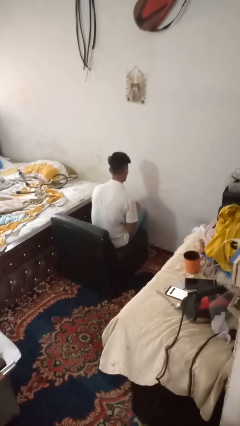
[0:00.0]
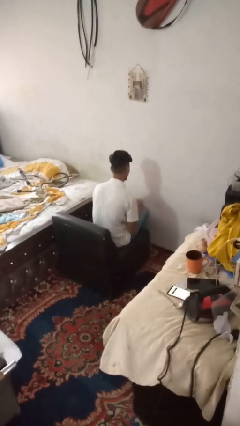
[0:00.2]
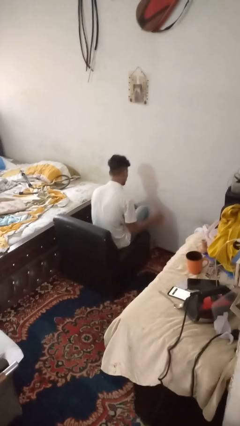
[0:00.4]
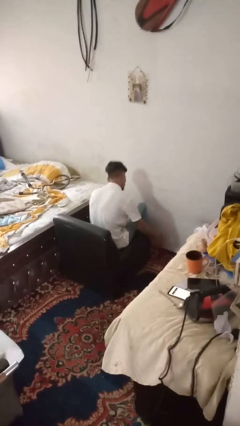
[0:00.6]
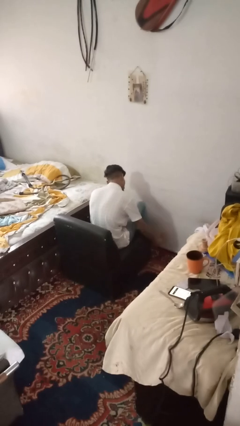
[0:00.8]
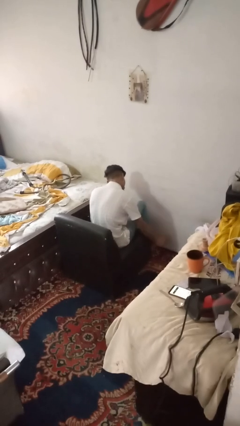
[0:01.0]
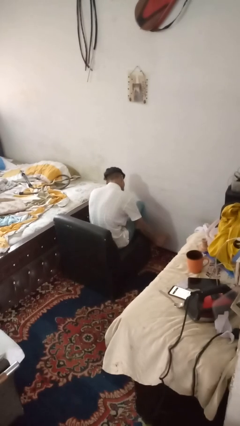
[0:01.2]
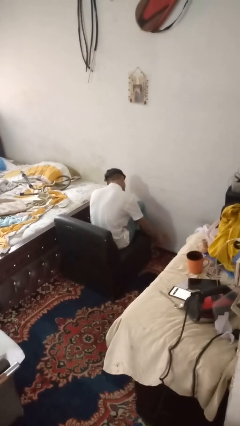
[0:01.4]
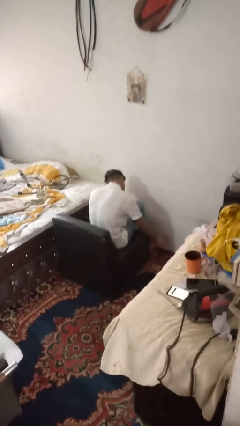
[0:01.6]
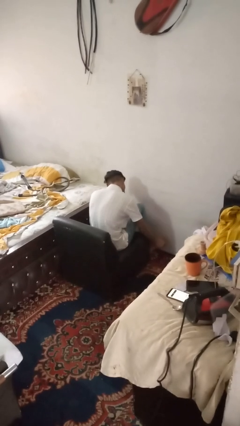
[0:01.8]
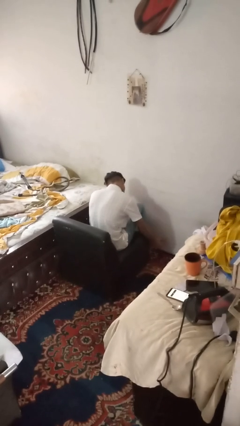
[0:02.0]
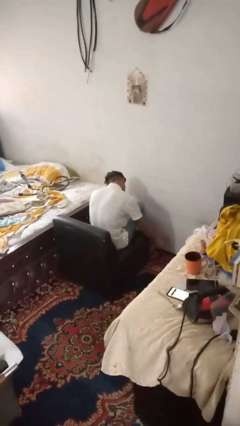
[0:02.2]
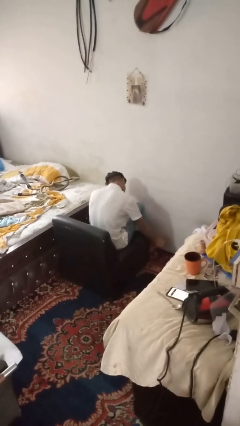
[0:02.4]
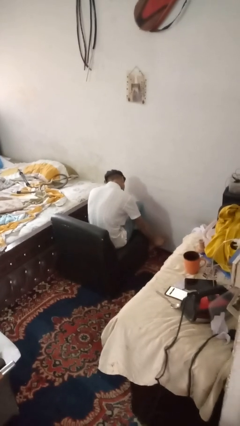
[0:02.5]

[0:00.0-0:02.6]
person rubs foot

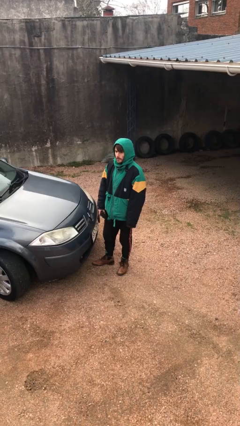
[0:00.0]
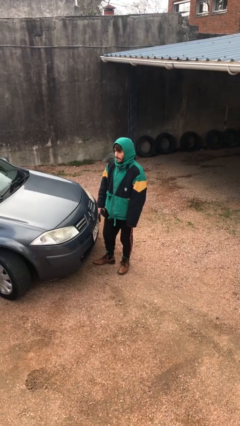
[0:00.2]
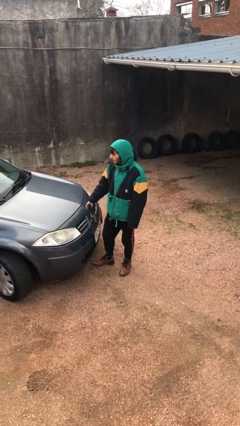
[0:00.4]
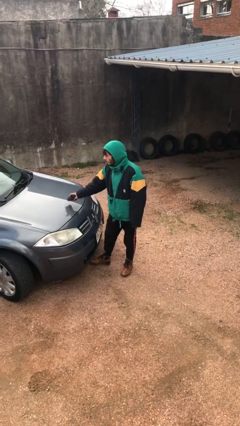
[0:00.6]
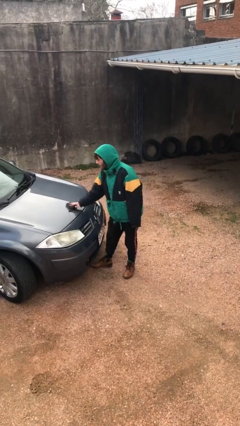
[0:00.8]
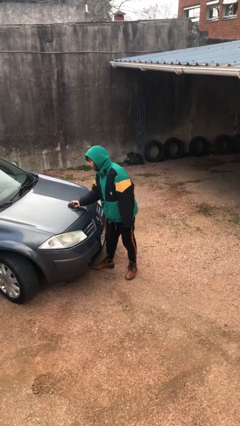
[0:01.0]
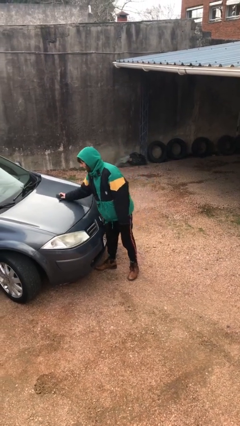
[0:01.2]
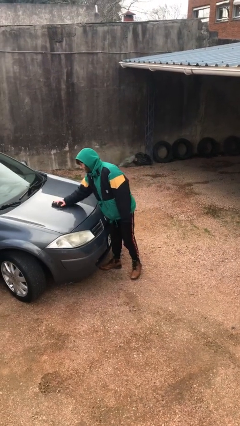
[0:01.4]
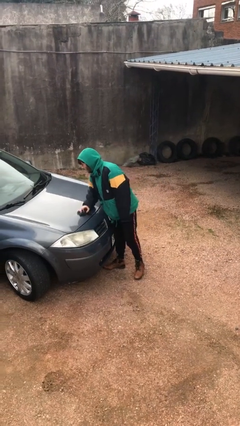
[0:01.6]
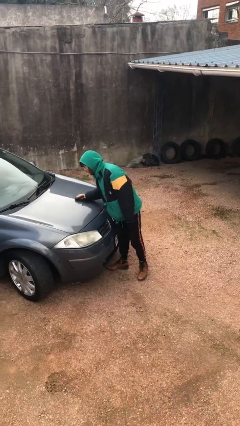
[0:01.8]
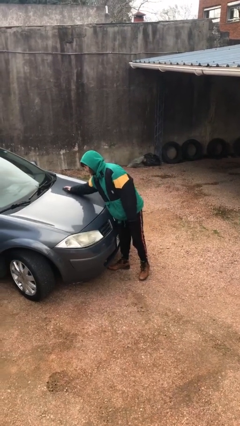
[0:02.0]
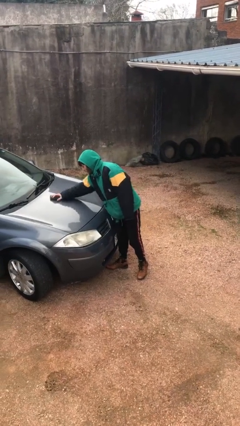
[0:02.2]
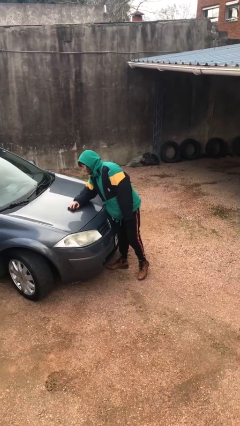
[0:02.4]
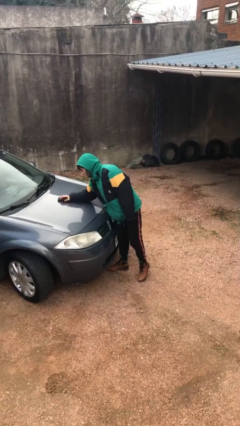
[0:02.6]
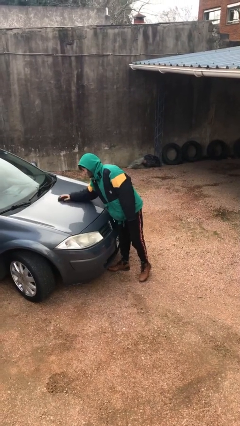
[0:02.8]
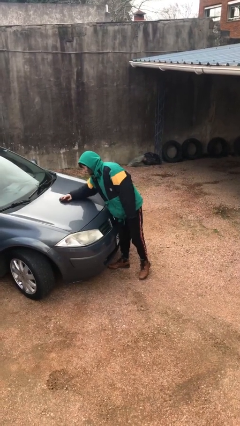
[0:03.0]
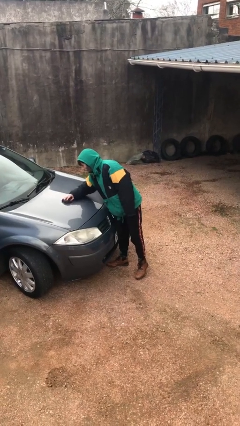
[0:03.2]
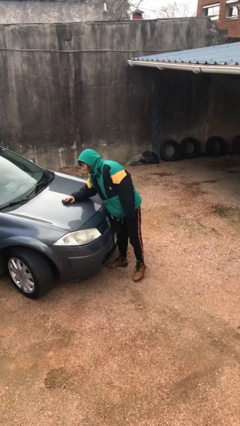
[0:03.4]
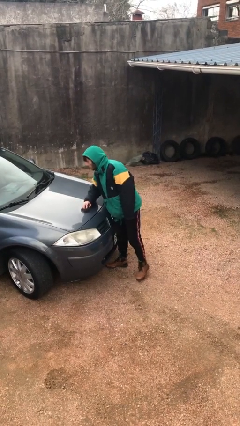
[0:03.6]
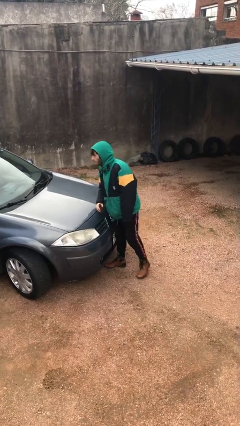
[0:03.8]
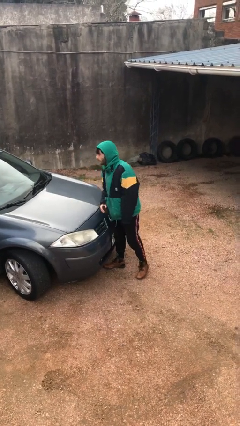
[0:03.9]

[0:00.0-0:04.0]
person polishes car with rag

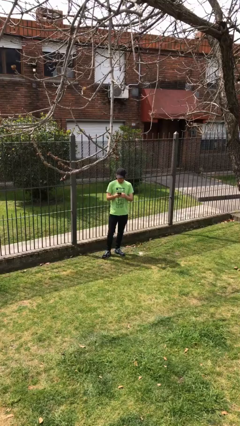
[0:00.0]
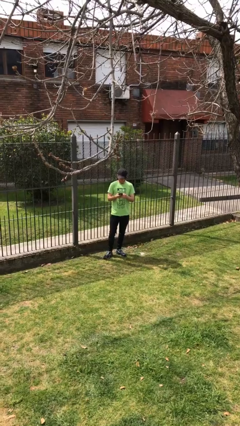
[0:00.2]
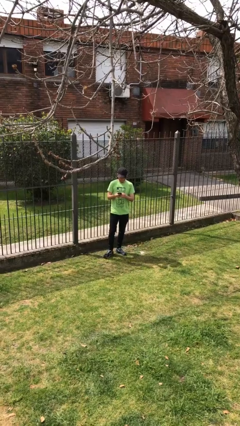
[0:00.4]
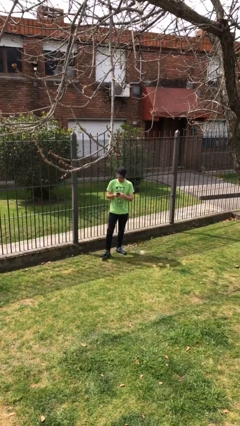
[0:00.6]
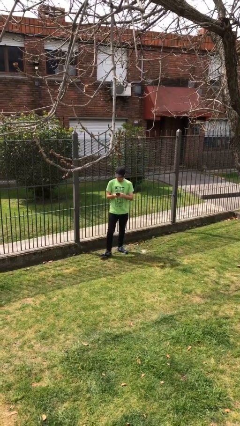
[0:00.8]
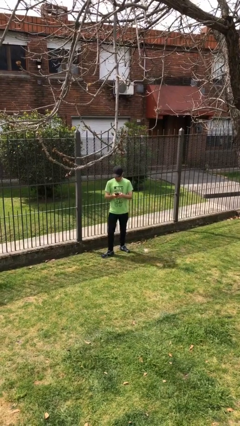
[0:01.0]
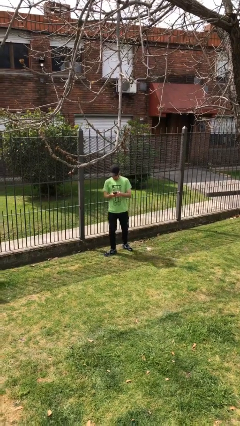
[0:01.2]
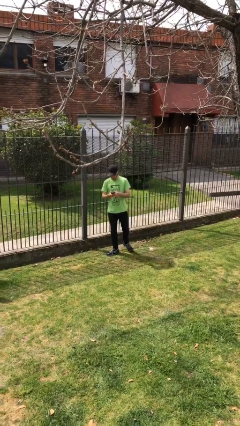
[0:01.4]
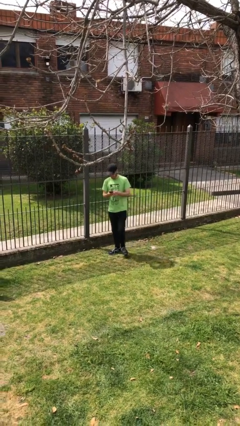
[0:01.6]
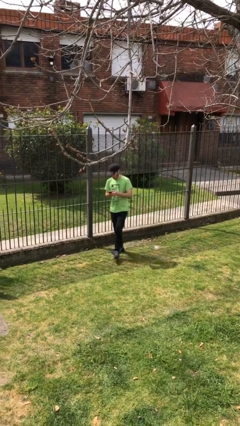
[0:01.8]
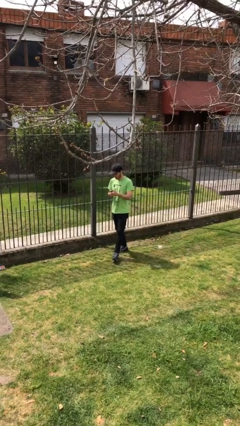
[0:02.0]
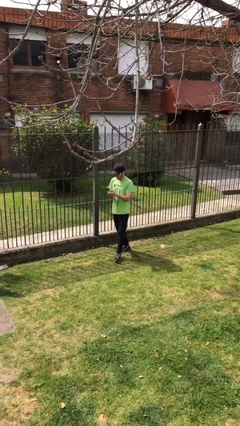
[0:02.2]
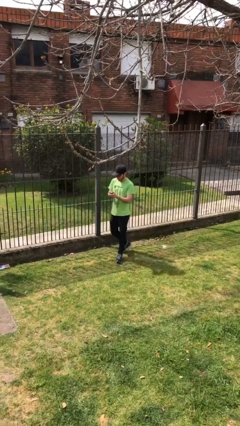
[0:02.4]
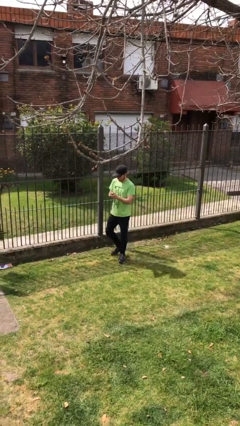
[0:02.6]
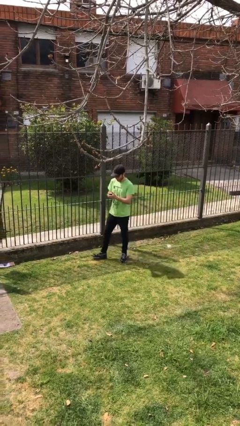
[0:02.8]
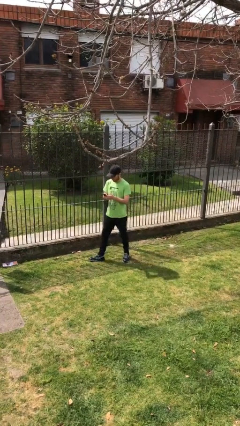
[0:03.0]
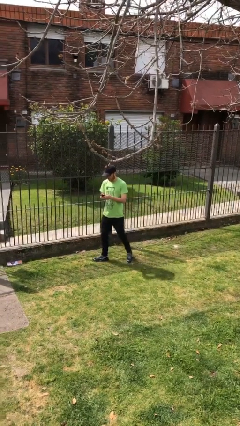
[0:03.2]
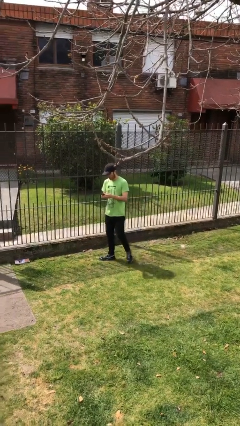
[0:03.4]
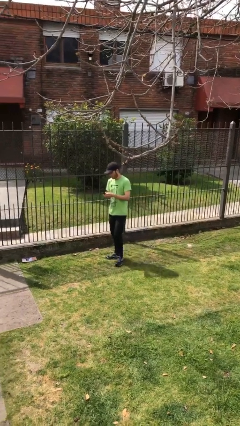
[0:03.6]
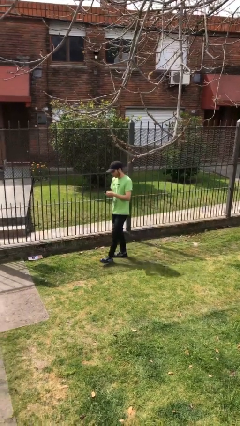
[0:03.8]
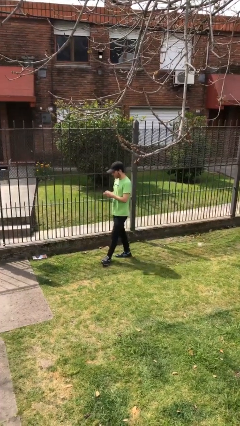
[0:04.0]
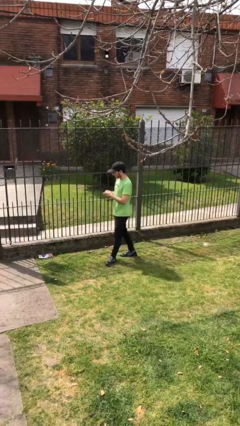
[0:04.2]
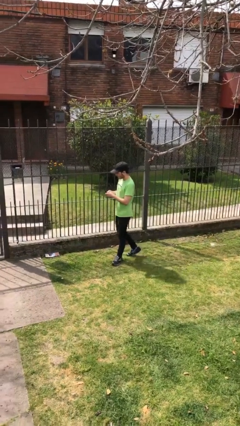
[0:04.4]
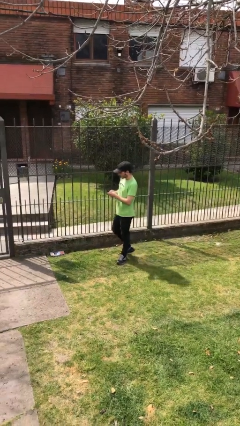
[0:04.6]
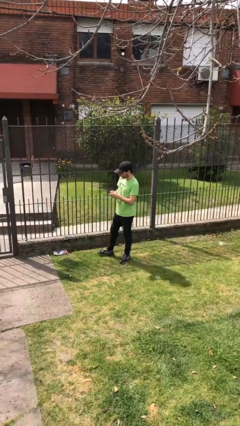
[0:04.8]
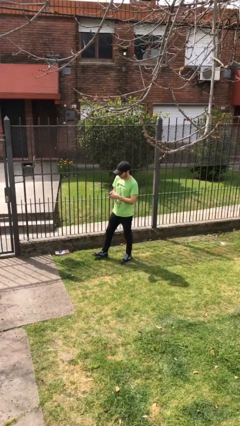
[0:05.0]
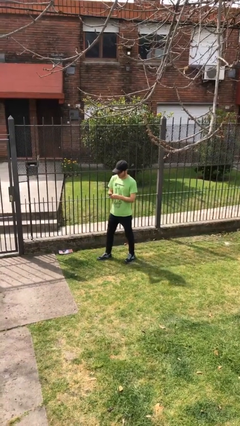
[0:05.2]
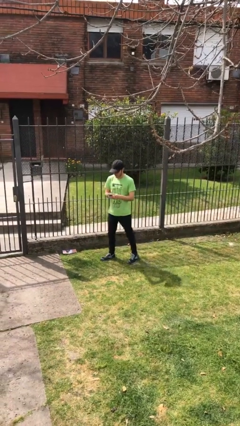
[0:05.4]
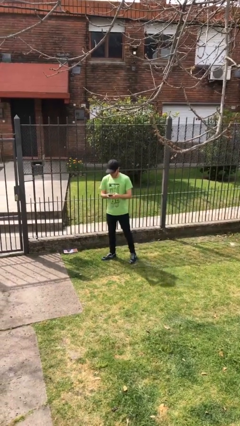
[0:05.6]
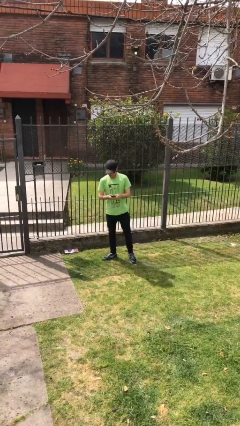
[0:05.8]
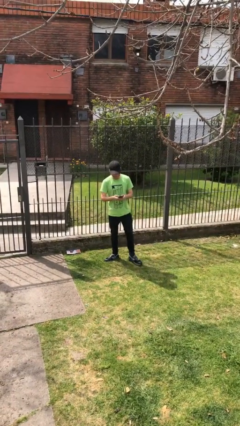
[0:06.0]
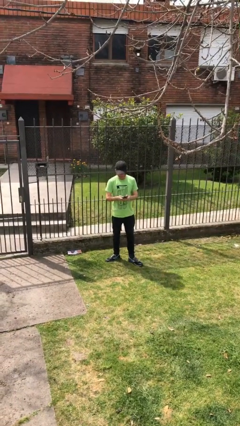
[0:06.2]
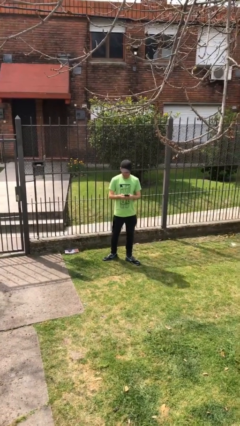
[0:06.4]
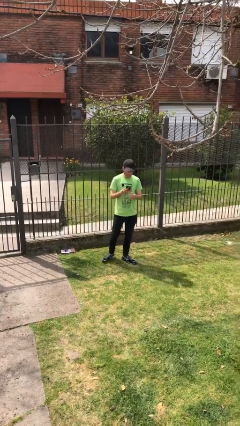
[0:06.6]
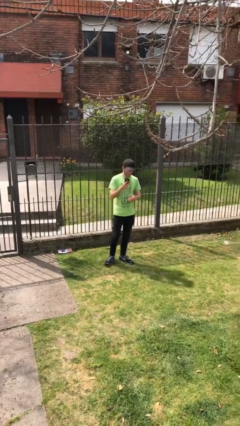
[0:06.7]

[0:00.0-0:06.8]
person texts on phone

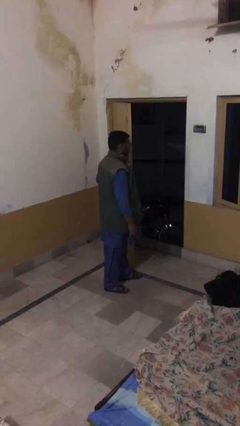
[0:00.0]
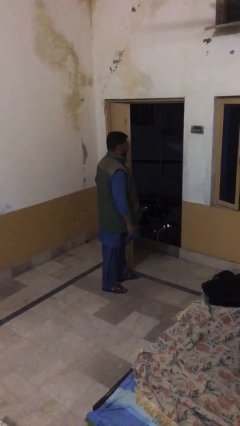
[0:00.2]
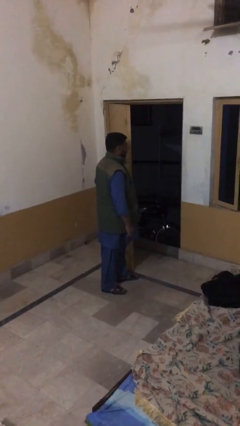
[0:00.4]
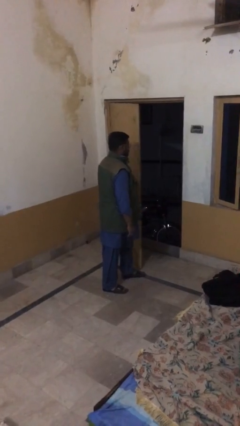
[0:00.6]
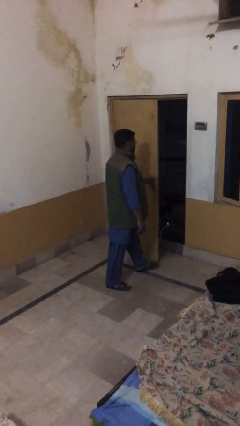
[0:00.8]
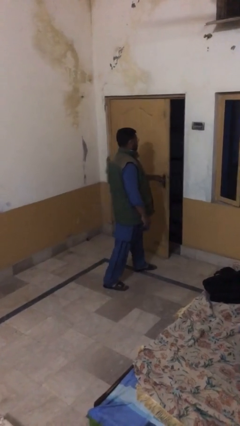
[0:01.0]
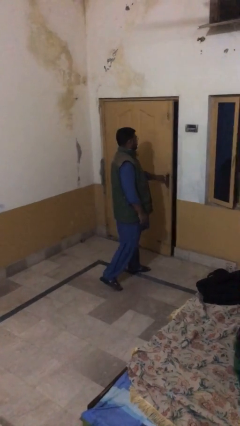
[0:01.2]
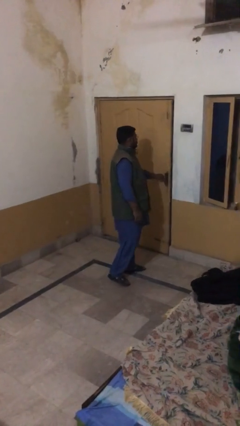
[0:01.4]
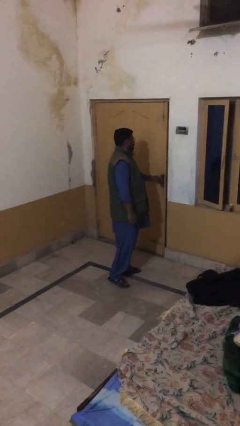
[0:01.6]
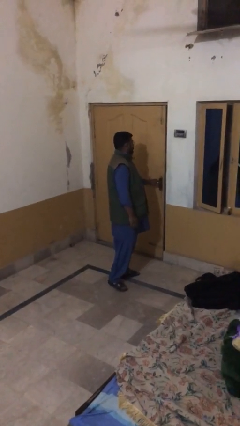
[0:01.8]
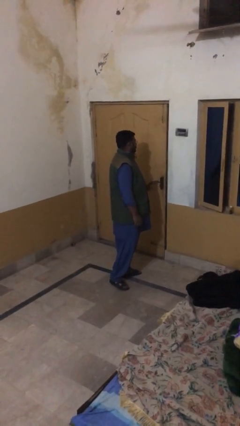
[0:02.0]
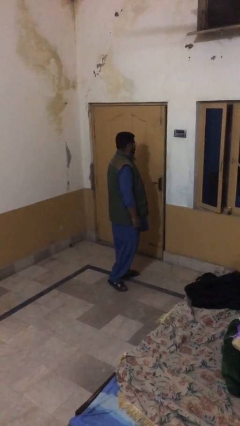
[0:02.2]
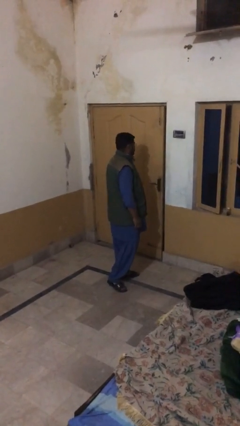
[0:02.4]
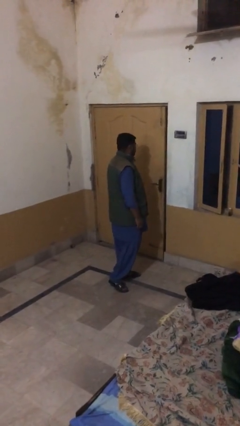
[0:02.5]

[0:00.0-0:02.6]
person closes facility door

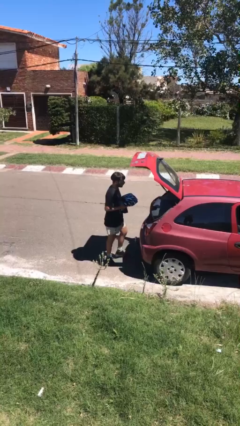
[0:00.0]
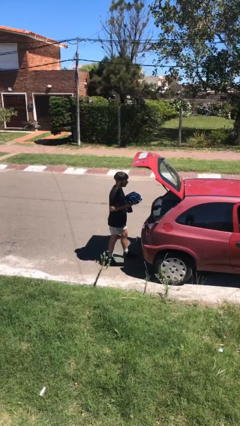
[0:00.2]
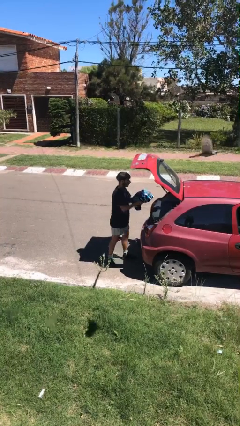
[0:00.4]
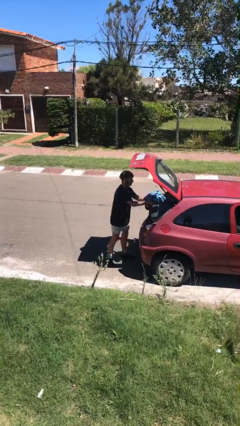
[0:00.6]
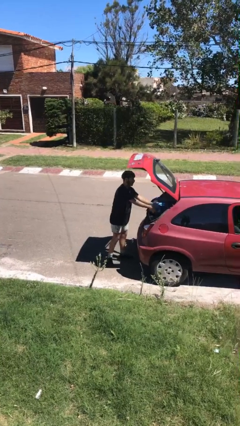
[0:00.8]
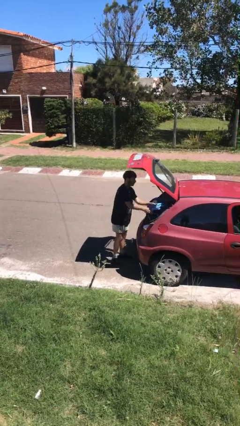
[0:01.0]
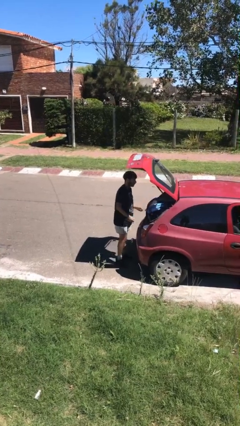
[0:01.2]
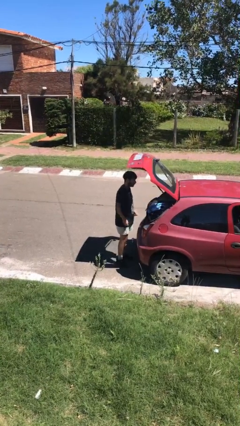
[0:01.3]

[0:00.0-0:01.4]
person loads car

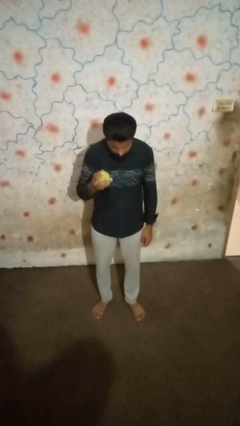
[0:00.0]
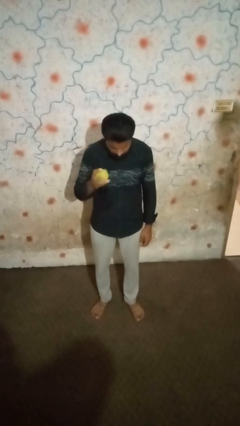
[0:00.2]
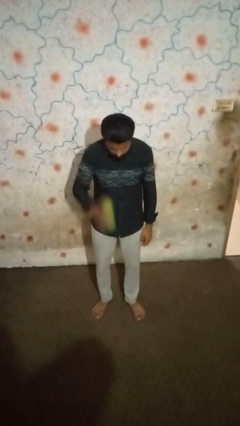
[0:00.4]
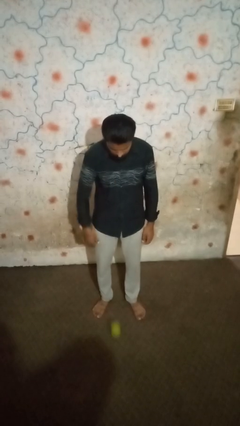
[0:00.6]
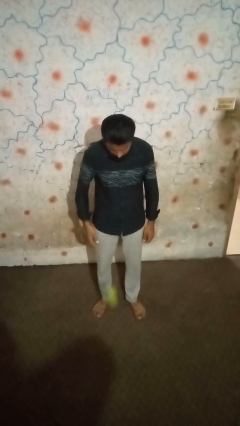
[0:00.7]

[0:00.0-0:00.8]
person bounces ball on floor
